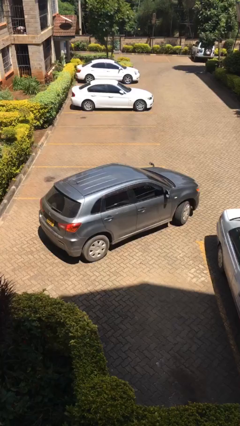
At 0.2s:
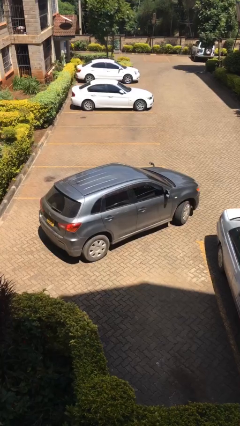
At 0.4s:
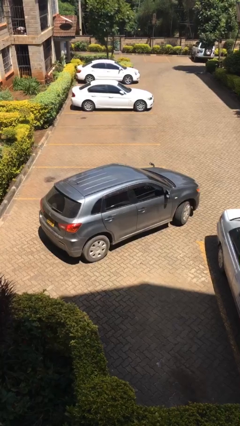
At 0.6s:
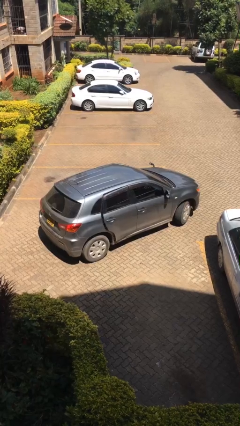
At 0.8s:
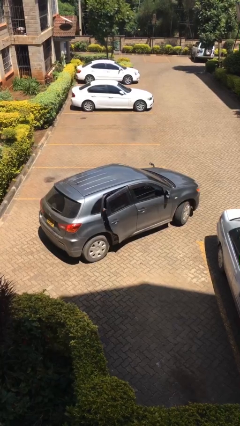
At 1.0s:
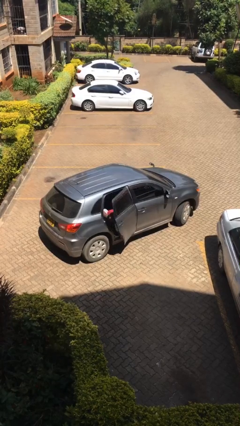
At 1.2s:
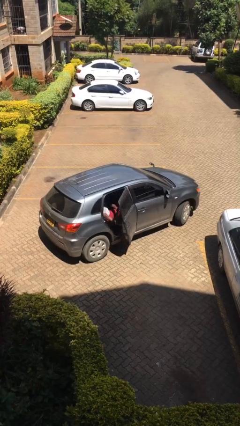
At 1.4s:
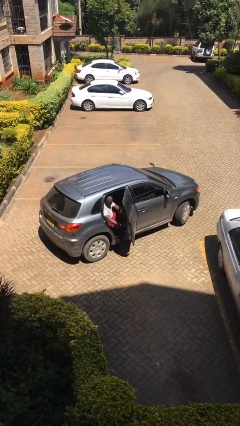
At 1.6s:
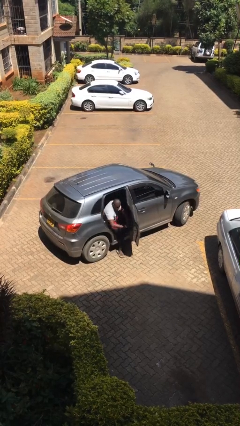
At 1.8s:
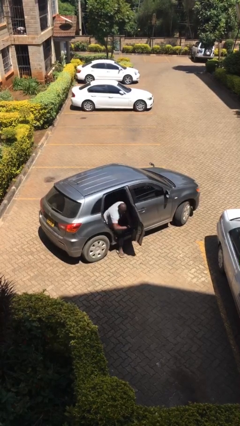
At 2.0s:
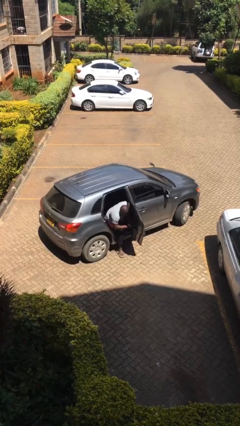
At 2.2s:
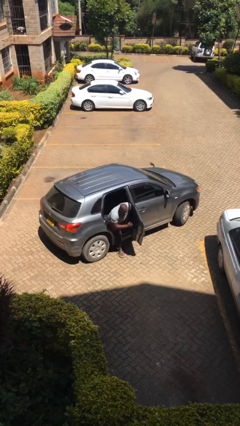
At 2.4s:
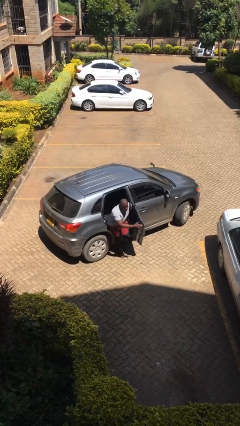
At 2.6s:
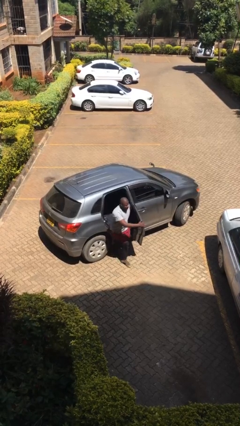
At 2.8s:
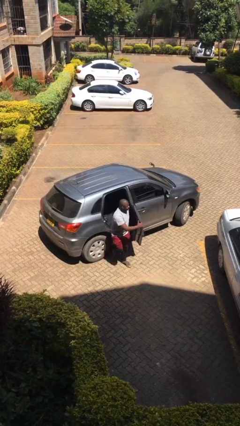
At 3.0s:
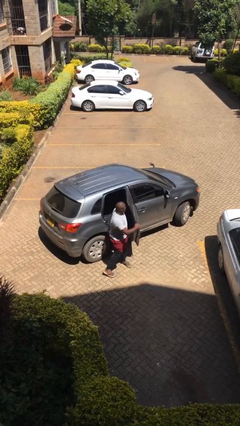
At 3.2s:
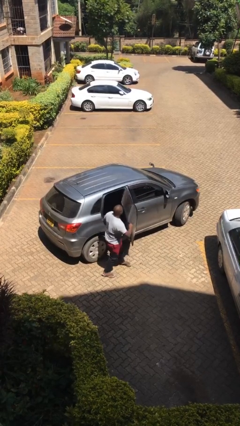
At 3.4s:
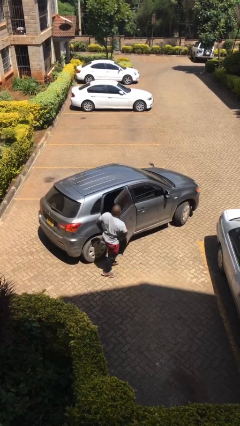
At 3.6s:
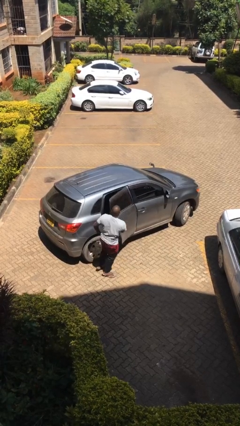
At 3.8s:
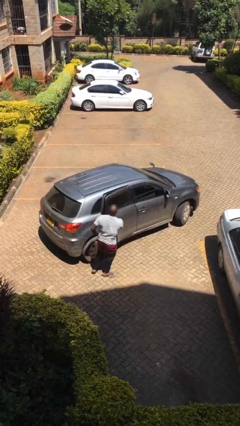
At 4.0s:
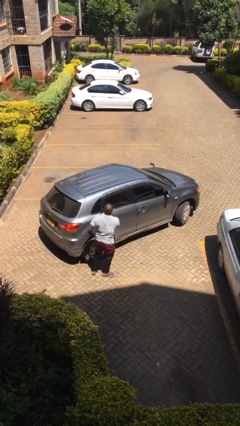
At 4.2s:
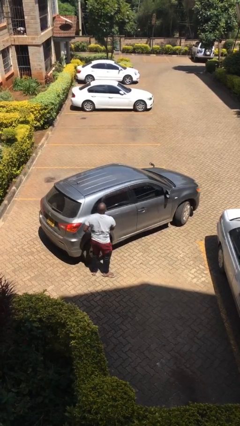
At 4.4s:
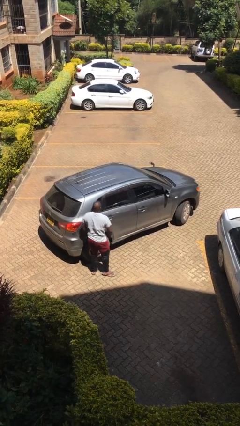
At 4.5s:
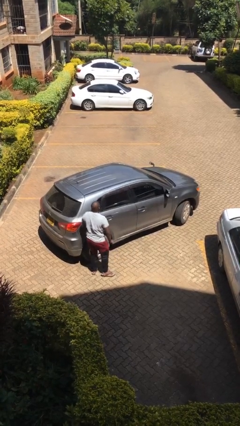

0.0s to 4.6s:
car drops off person

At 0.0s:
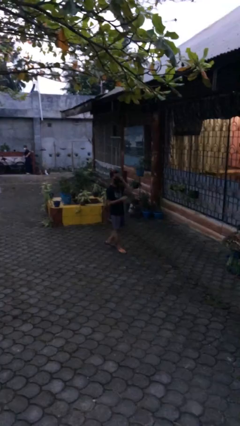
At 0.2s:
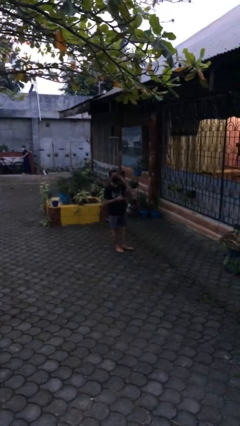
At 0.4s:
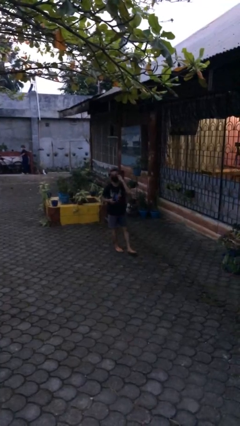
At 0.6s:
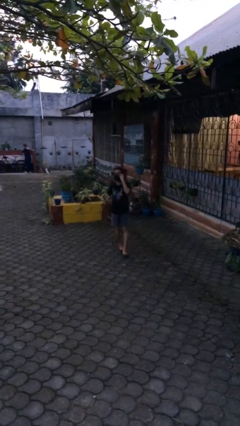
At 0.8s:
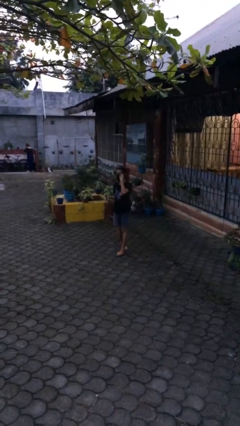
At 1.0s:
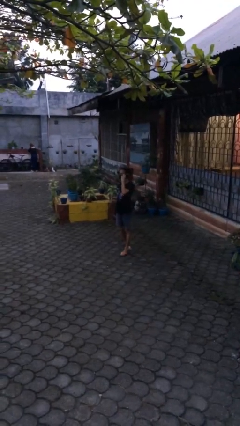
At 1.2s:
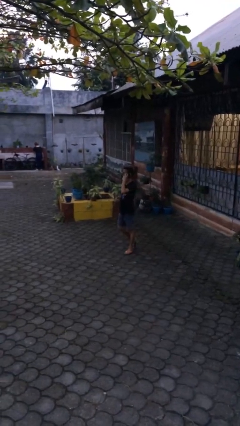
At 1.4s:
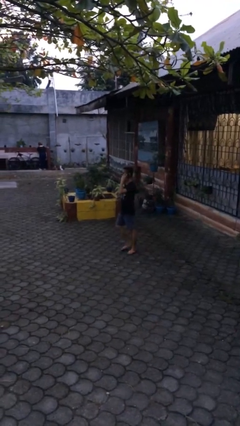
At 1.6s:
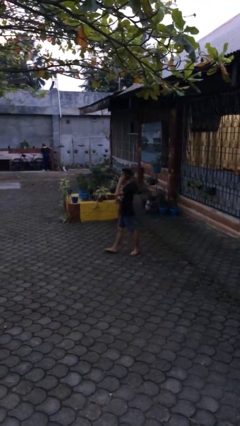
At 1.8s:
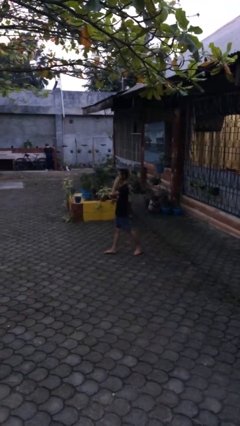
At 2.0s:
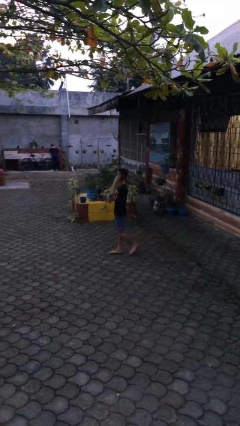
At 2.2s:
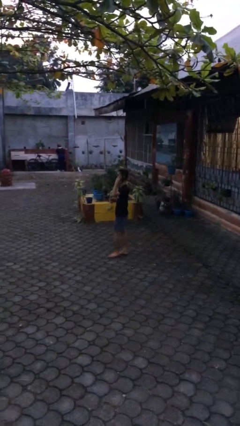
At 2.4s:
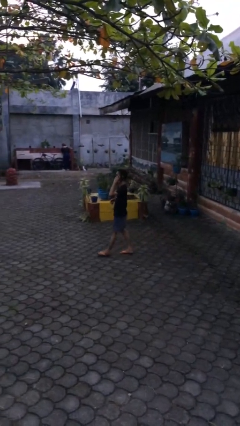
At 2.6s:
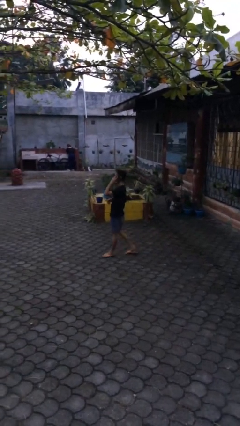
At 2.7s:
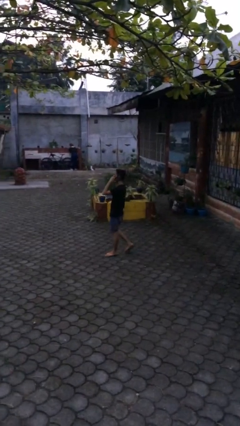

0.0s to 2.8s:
person talks on phone

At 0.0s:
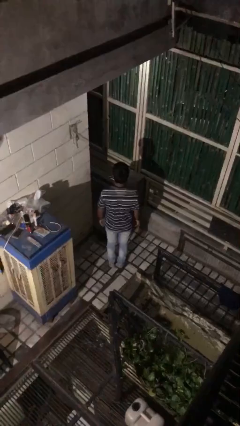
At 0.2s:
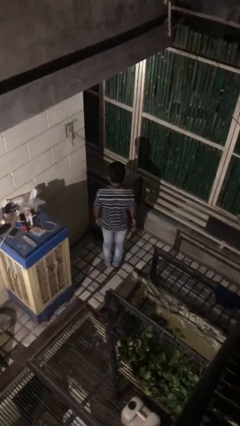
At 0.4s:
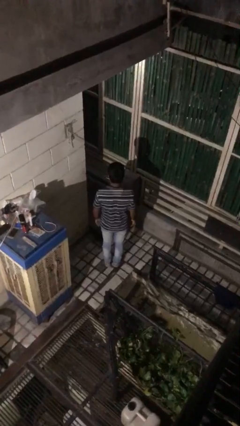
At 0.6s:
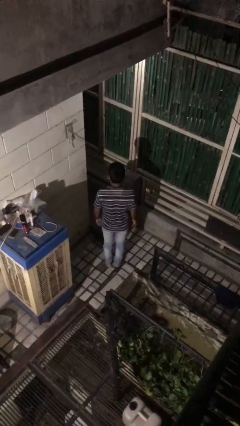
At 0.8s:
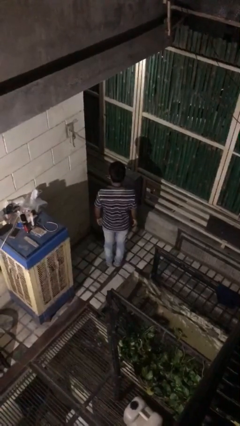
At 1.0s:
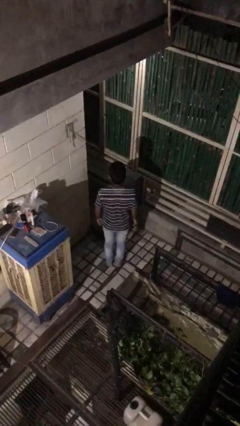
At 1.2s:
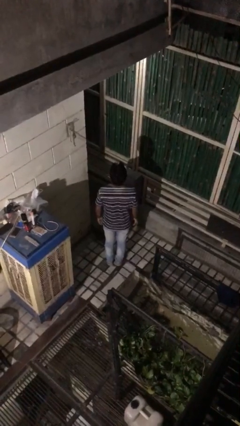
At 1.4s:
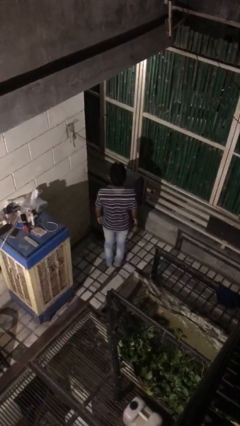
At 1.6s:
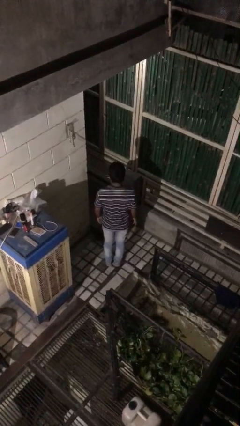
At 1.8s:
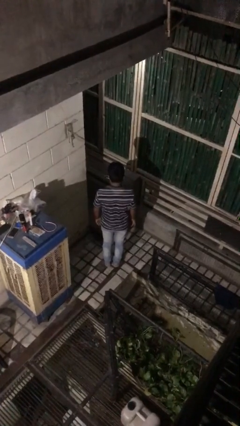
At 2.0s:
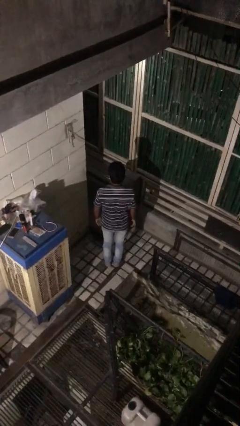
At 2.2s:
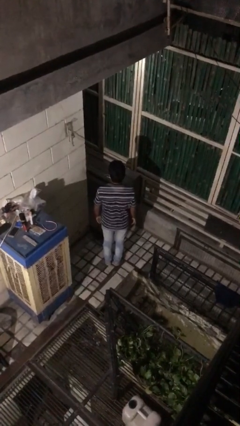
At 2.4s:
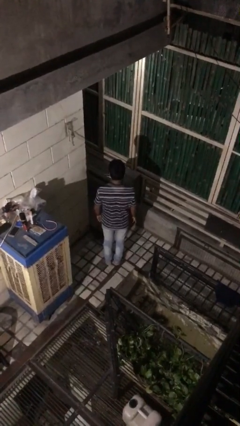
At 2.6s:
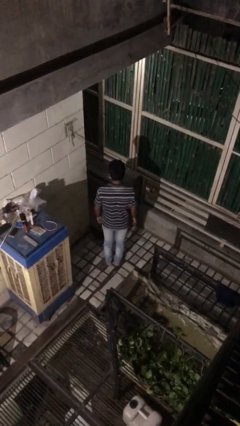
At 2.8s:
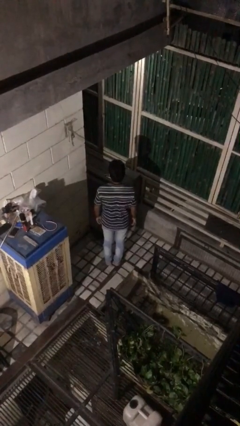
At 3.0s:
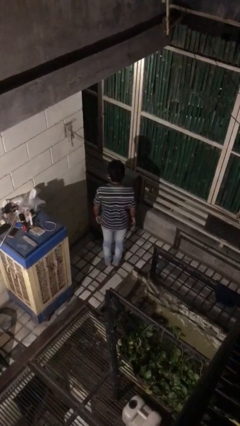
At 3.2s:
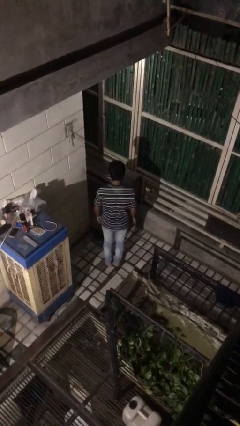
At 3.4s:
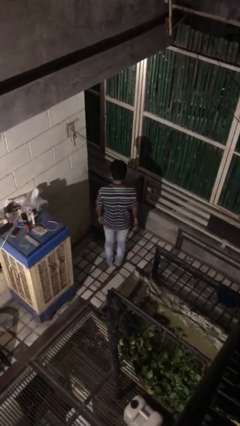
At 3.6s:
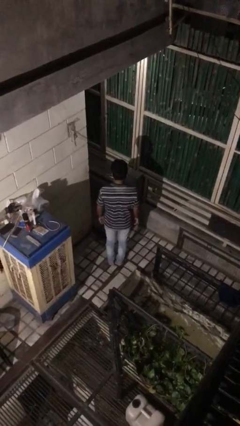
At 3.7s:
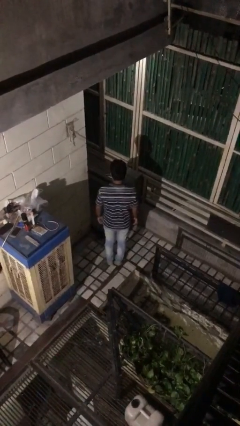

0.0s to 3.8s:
person nods head

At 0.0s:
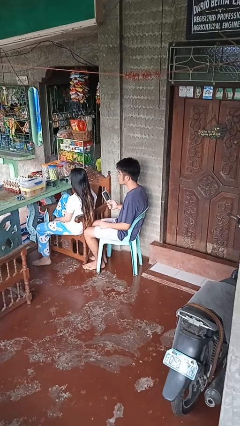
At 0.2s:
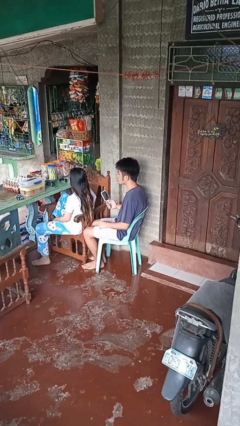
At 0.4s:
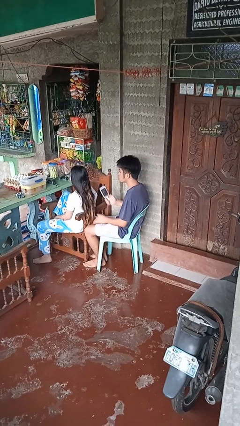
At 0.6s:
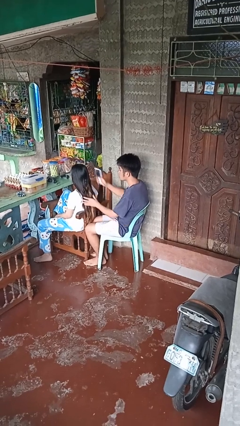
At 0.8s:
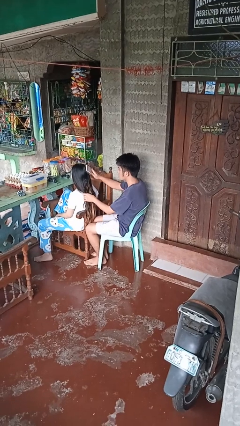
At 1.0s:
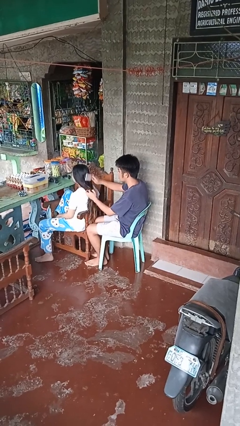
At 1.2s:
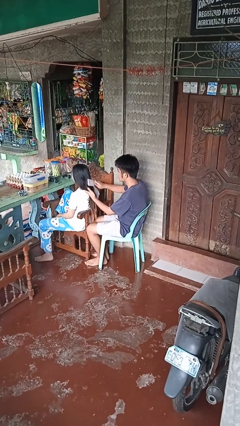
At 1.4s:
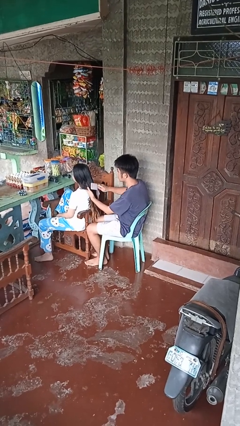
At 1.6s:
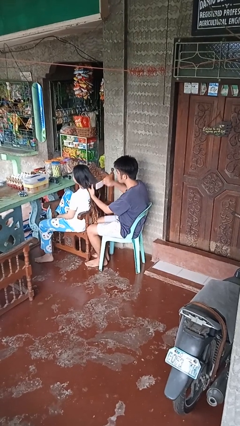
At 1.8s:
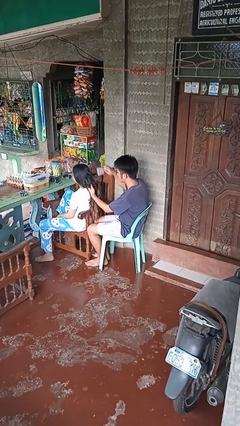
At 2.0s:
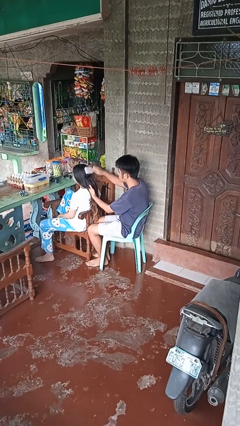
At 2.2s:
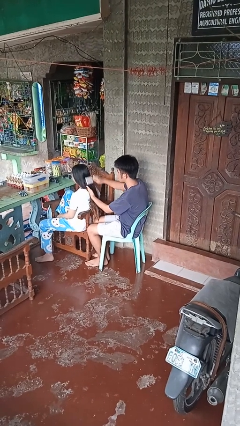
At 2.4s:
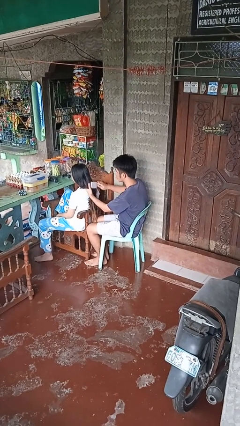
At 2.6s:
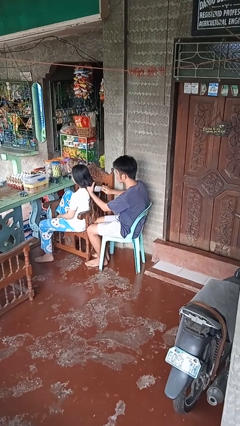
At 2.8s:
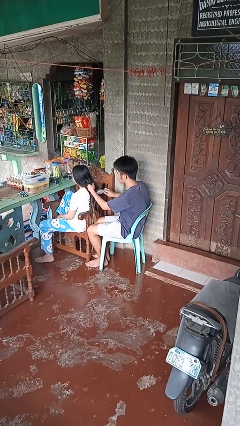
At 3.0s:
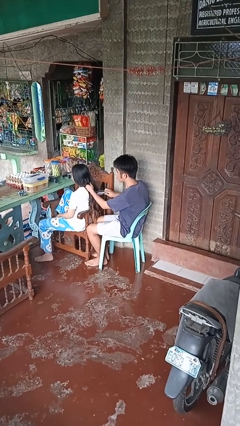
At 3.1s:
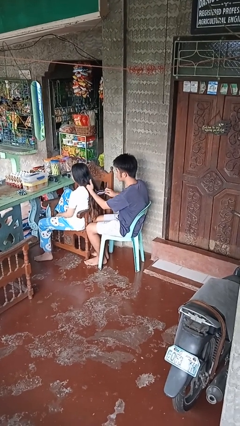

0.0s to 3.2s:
person brushes hair of person

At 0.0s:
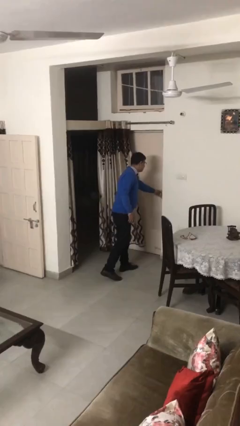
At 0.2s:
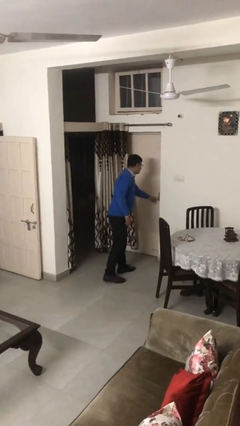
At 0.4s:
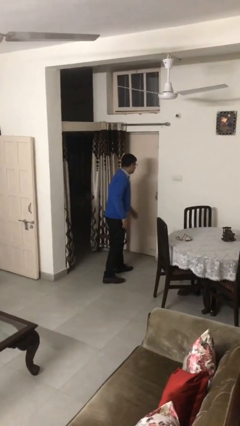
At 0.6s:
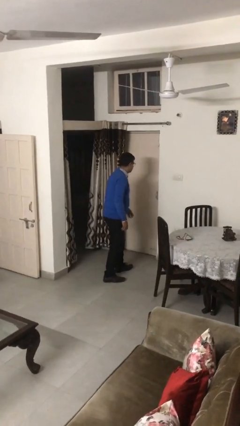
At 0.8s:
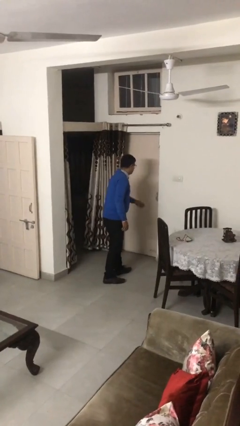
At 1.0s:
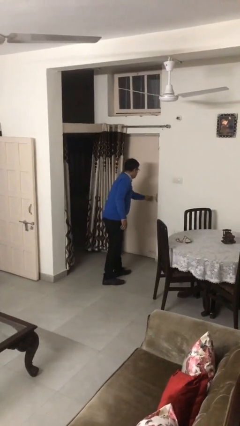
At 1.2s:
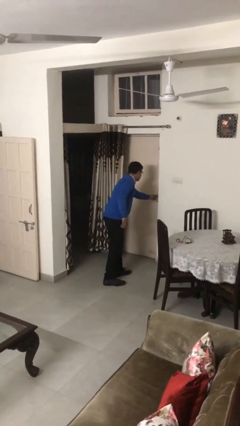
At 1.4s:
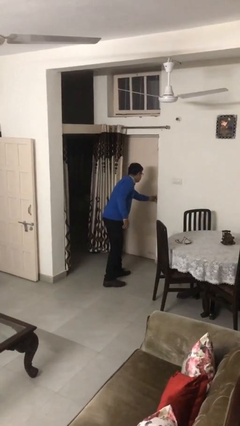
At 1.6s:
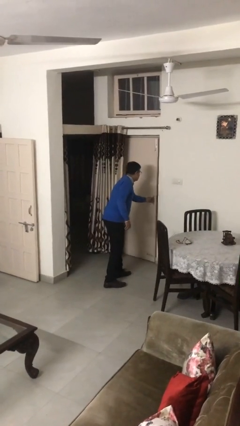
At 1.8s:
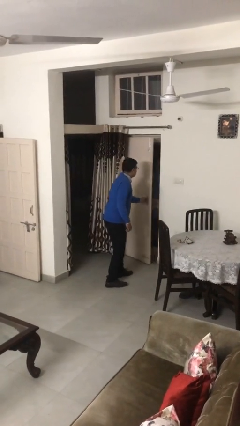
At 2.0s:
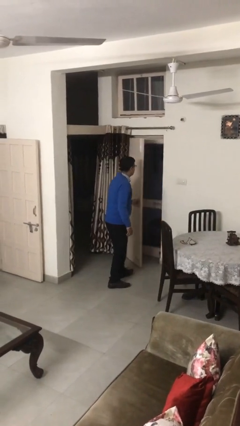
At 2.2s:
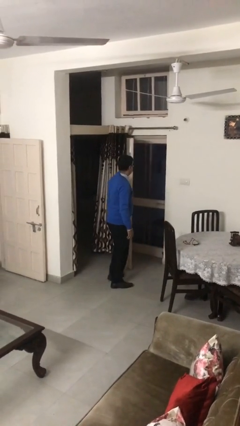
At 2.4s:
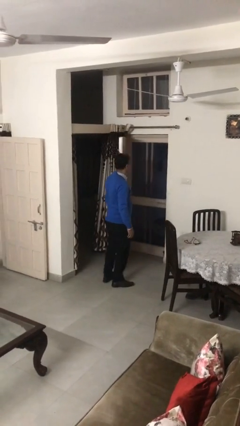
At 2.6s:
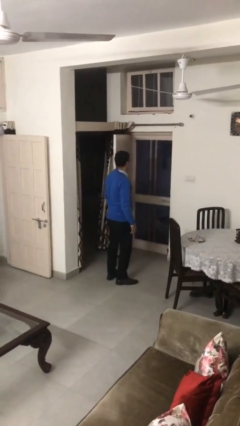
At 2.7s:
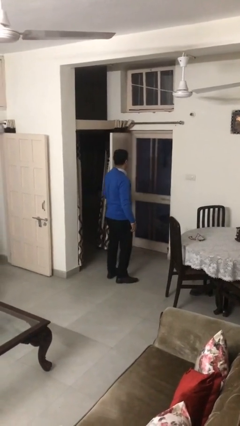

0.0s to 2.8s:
person opens facility door

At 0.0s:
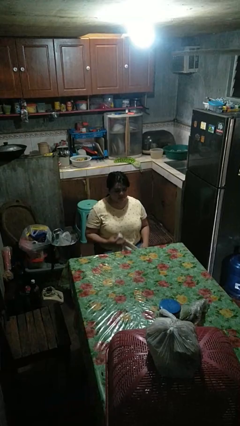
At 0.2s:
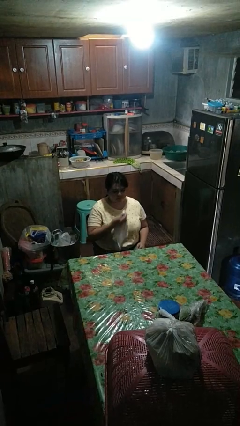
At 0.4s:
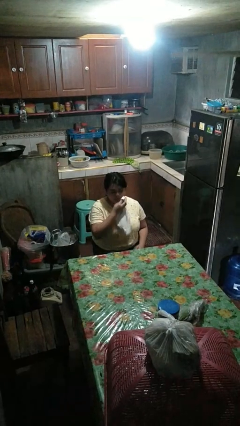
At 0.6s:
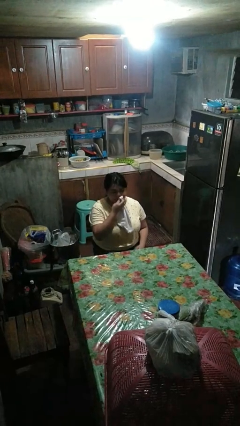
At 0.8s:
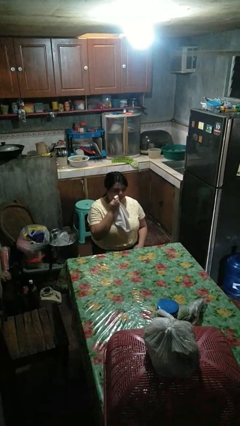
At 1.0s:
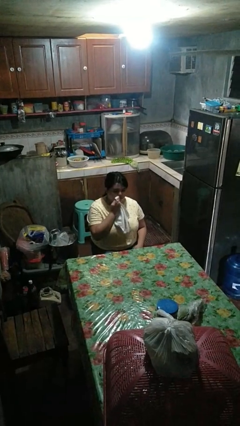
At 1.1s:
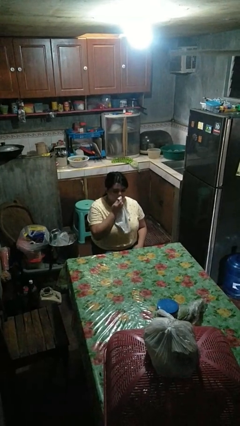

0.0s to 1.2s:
person wipes mouth with napkin
